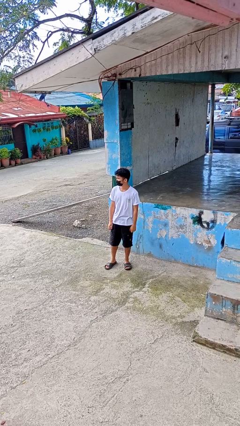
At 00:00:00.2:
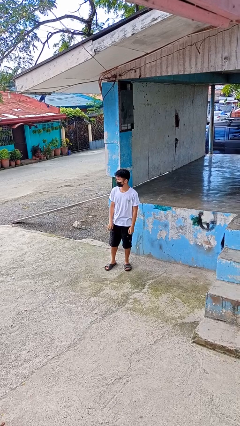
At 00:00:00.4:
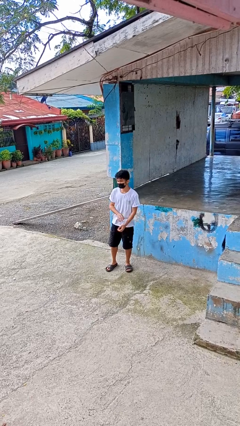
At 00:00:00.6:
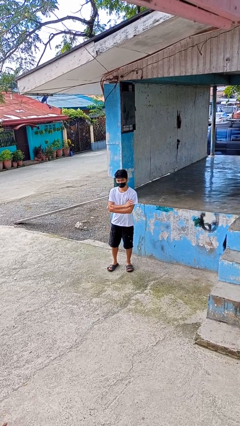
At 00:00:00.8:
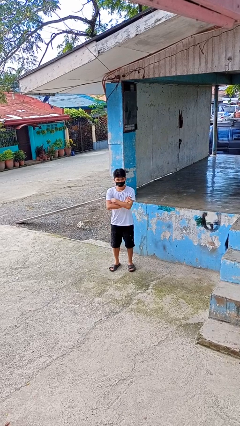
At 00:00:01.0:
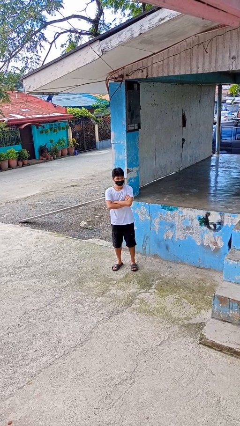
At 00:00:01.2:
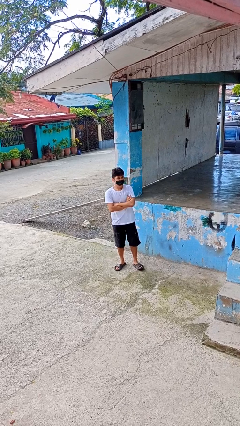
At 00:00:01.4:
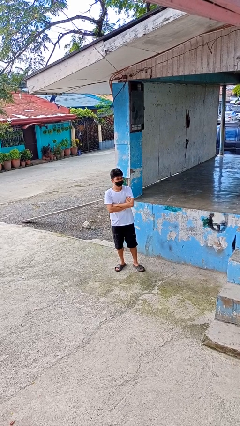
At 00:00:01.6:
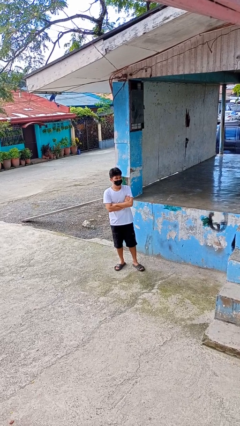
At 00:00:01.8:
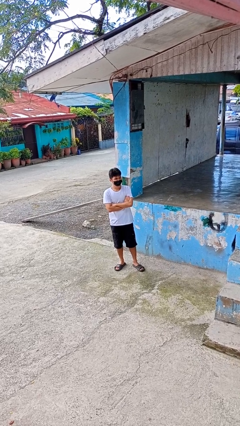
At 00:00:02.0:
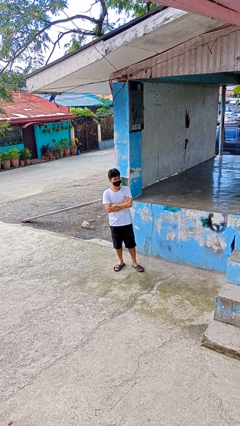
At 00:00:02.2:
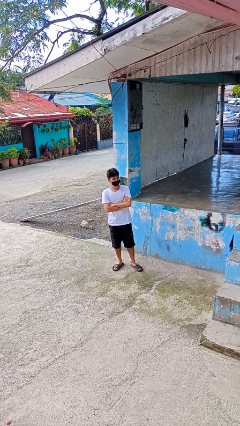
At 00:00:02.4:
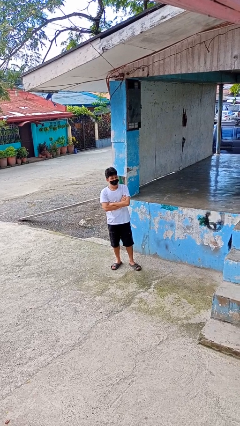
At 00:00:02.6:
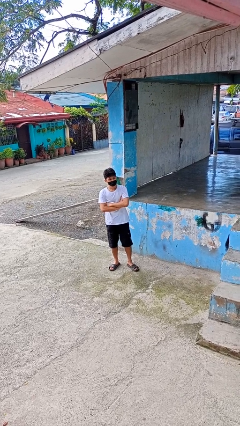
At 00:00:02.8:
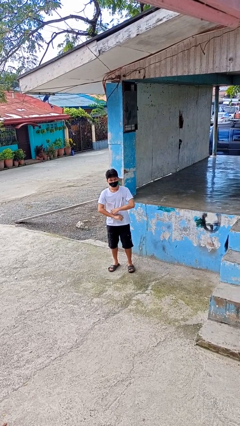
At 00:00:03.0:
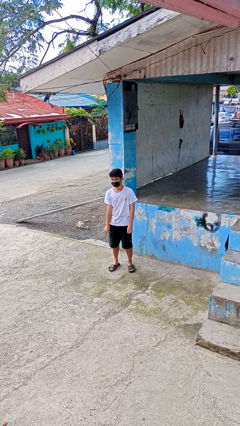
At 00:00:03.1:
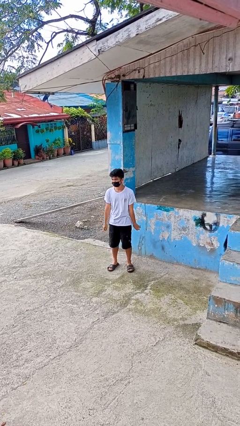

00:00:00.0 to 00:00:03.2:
person crosses arms

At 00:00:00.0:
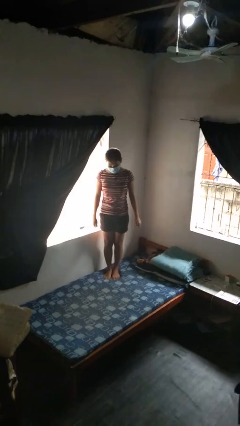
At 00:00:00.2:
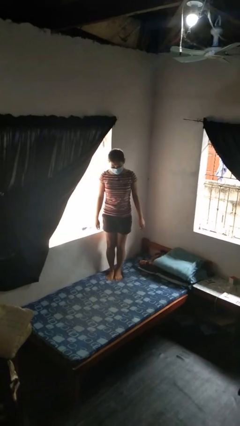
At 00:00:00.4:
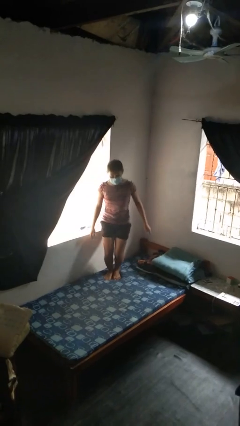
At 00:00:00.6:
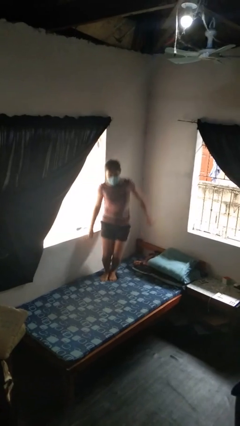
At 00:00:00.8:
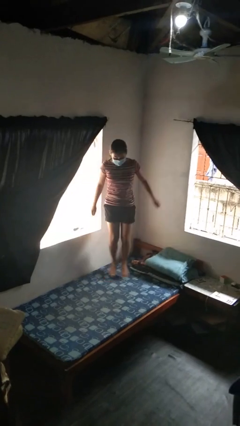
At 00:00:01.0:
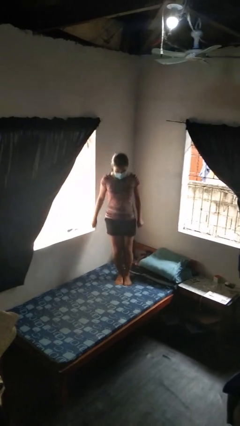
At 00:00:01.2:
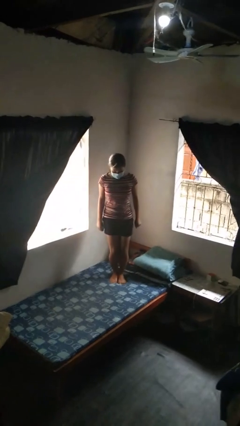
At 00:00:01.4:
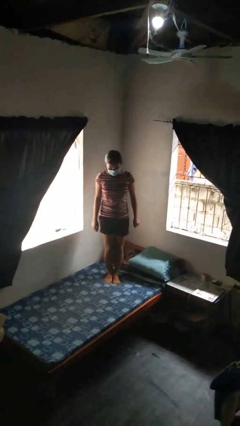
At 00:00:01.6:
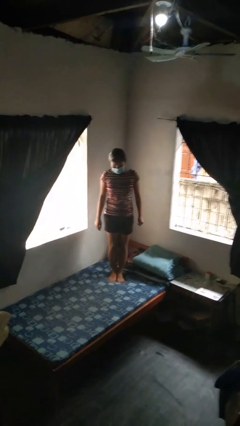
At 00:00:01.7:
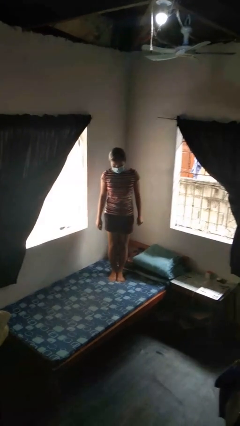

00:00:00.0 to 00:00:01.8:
person jumps on bed

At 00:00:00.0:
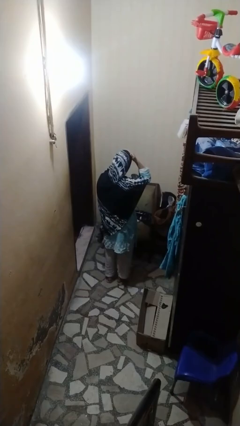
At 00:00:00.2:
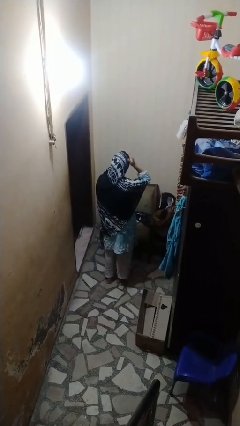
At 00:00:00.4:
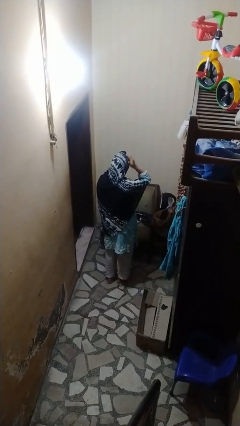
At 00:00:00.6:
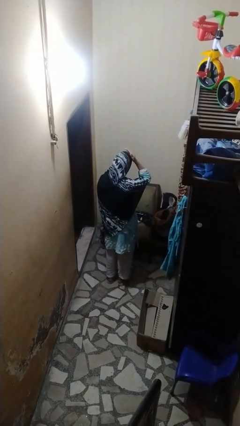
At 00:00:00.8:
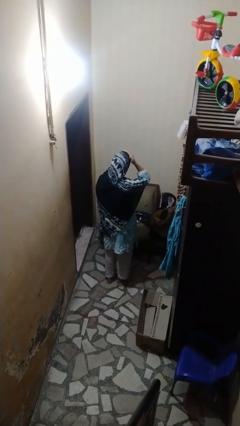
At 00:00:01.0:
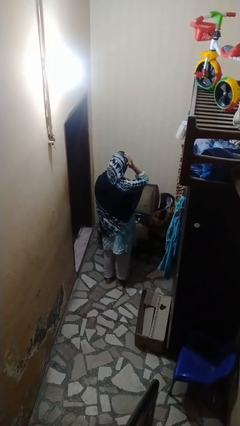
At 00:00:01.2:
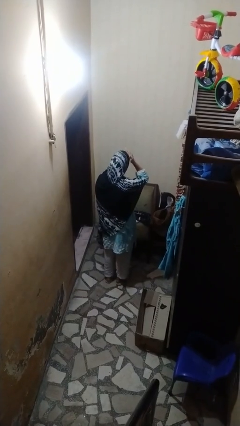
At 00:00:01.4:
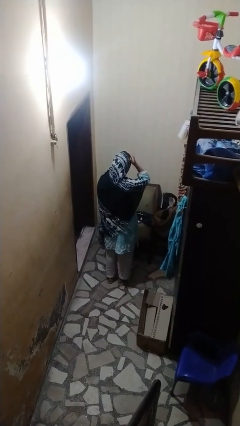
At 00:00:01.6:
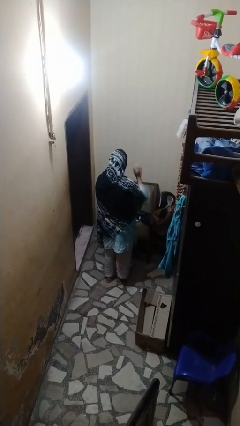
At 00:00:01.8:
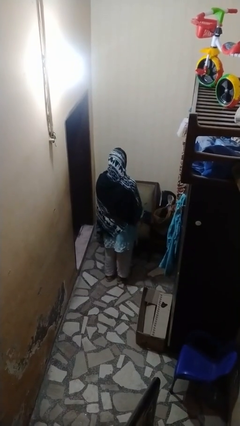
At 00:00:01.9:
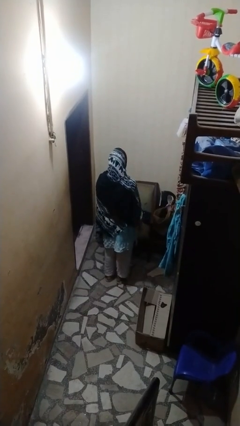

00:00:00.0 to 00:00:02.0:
person pats head

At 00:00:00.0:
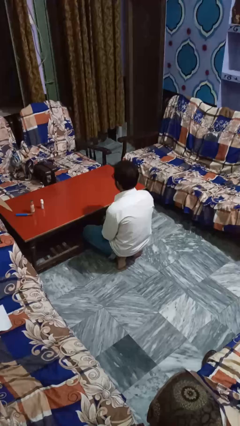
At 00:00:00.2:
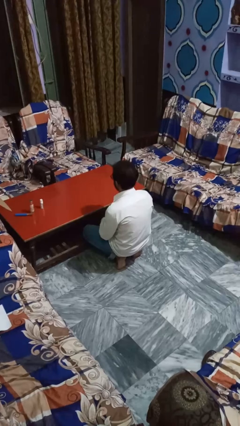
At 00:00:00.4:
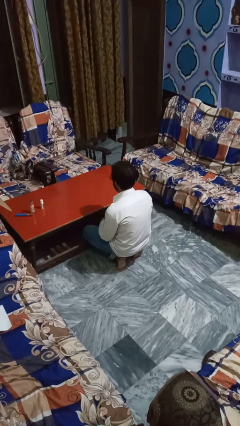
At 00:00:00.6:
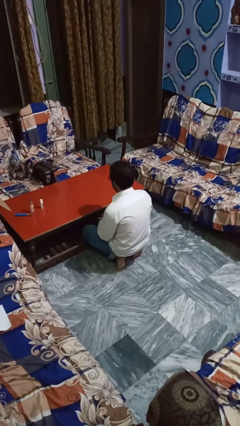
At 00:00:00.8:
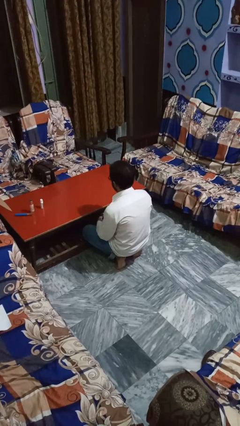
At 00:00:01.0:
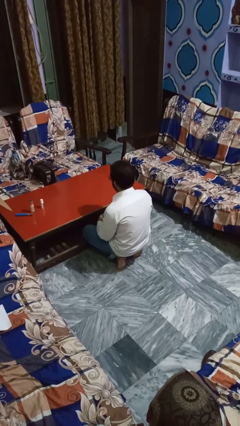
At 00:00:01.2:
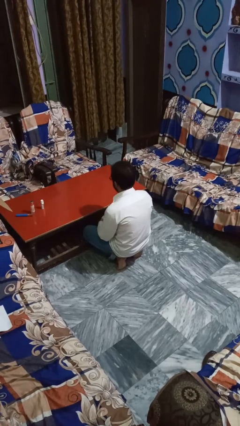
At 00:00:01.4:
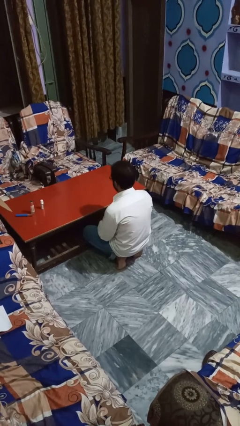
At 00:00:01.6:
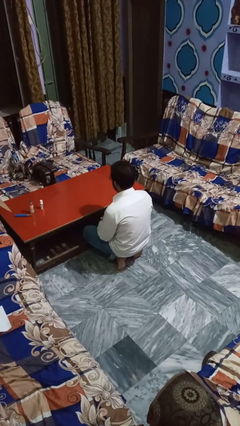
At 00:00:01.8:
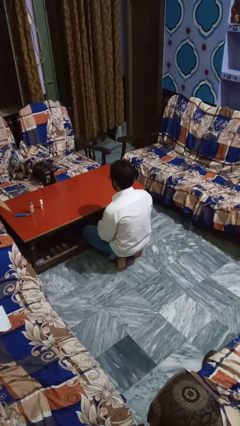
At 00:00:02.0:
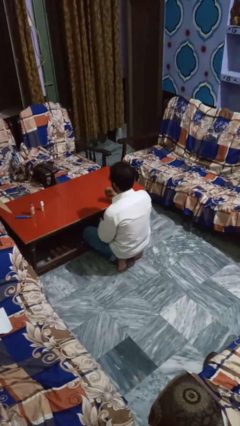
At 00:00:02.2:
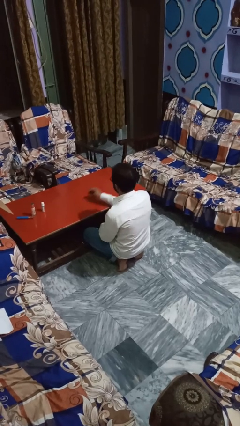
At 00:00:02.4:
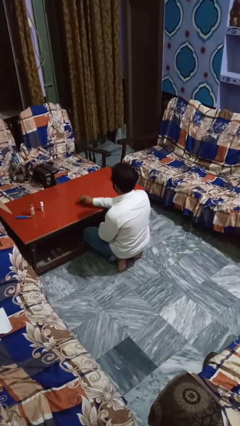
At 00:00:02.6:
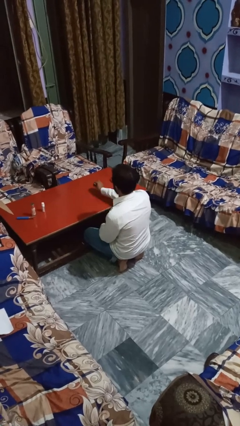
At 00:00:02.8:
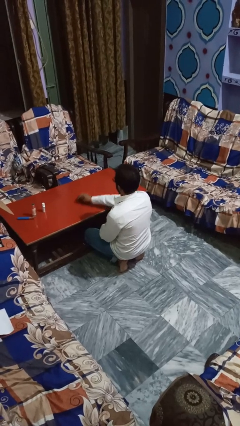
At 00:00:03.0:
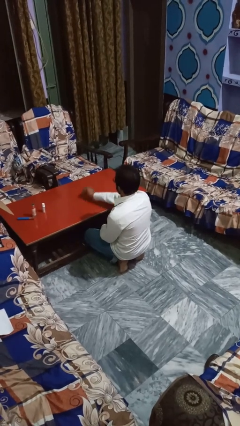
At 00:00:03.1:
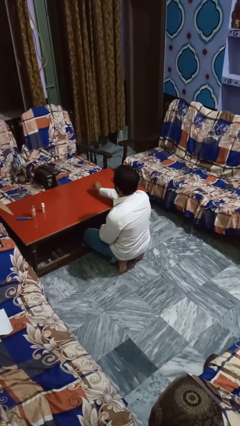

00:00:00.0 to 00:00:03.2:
person cleans table with rag

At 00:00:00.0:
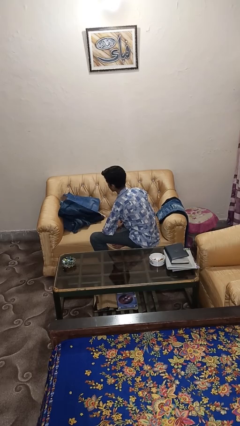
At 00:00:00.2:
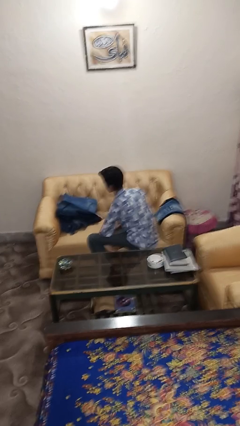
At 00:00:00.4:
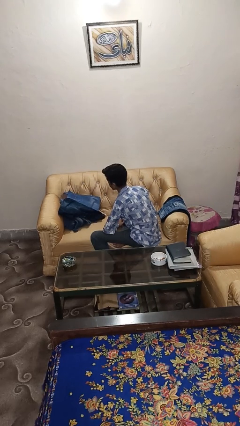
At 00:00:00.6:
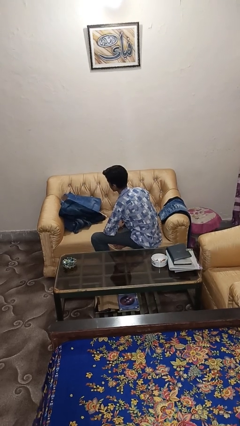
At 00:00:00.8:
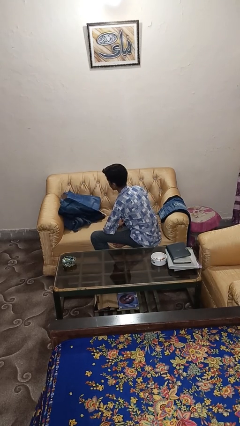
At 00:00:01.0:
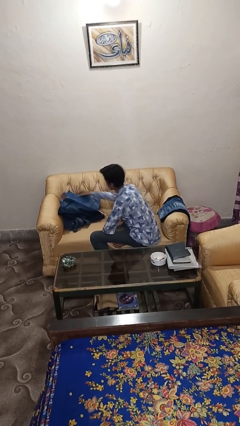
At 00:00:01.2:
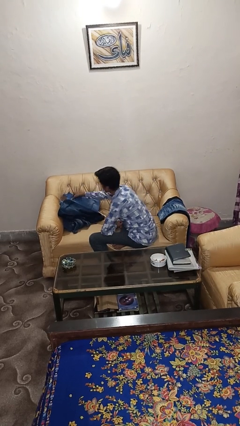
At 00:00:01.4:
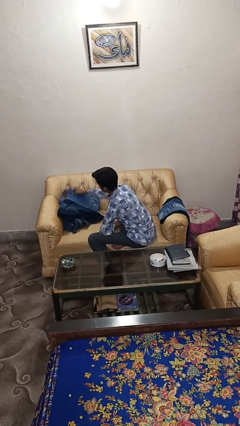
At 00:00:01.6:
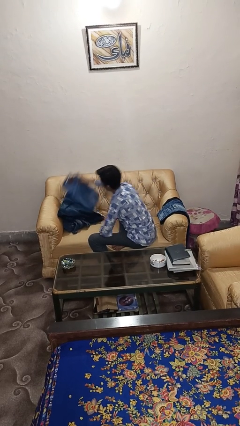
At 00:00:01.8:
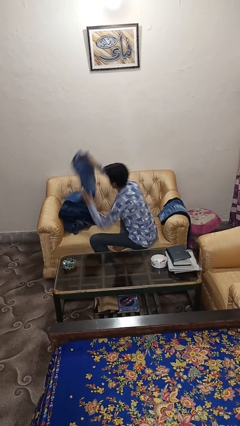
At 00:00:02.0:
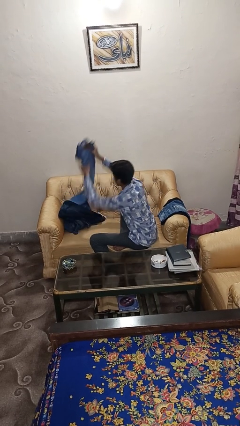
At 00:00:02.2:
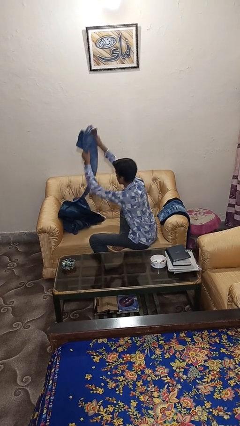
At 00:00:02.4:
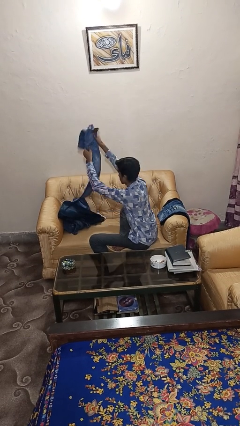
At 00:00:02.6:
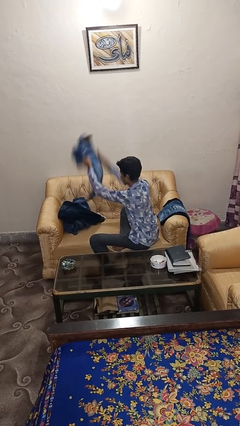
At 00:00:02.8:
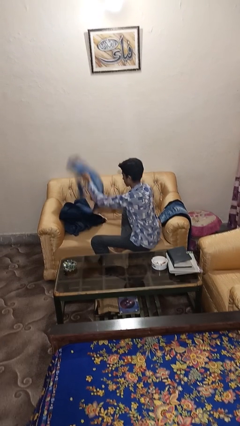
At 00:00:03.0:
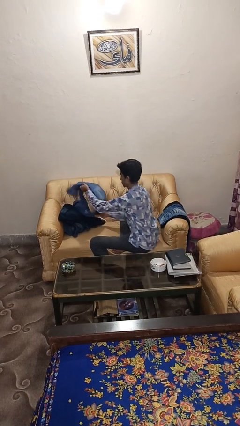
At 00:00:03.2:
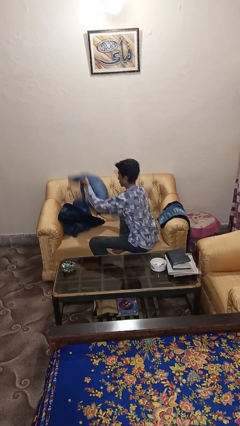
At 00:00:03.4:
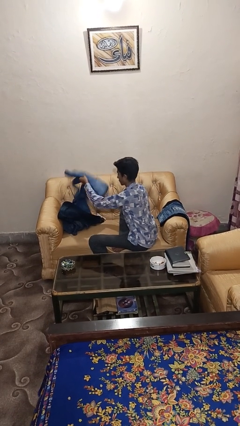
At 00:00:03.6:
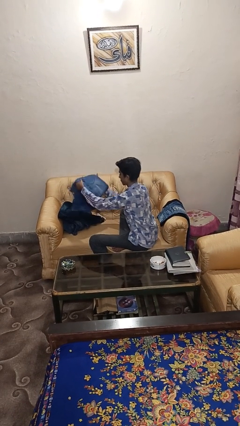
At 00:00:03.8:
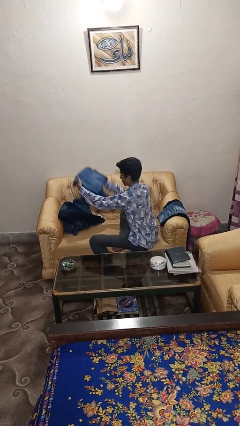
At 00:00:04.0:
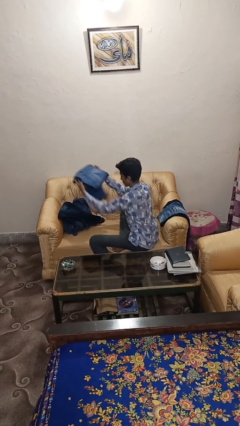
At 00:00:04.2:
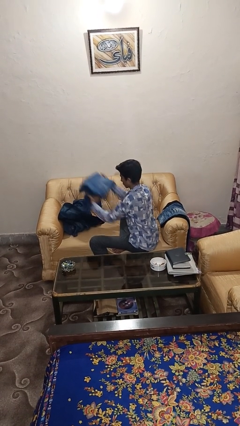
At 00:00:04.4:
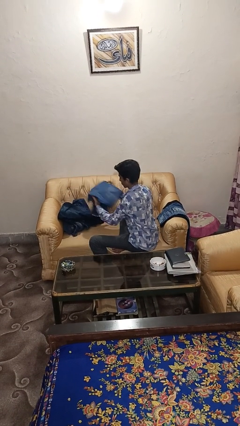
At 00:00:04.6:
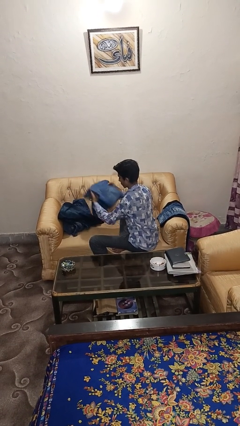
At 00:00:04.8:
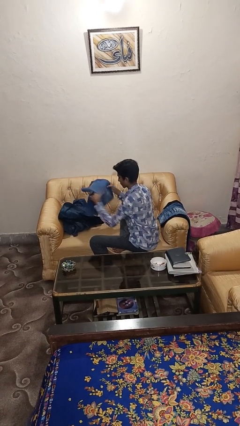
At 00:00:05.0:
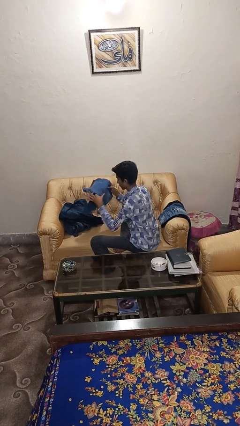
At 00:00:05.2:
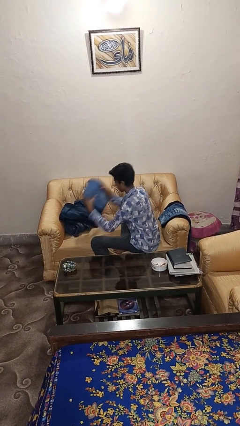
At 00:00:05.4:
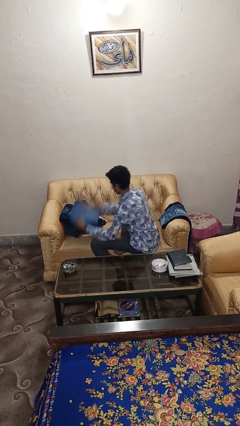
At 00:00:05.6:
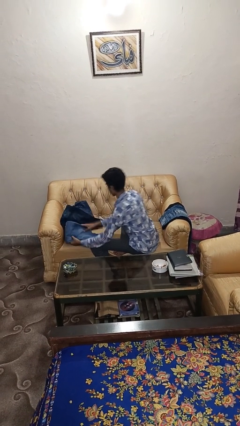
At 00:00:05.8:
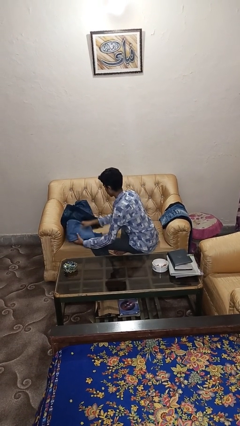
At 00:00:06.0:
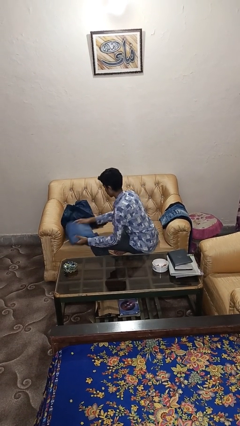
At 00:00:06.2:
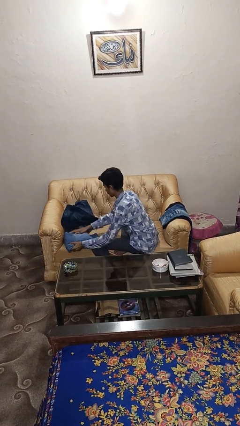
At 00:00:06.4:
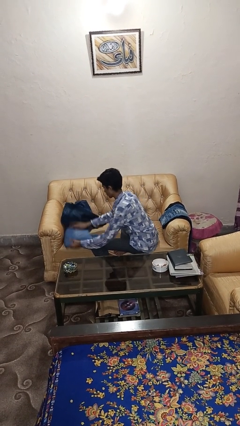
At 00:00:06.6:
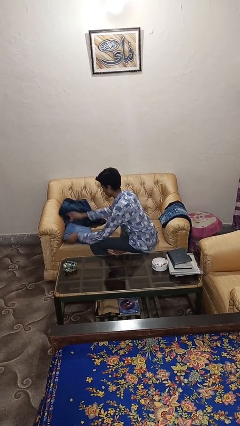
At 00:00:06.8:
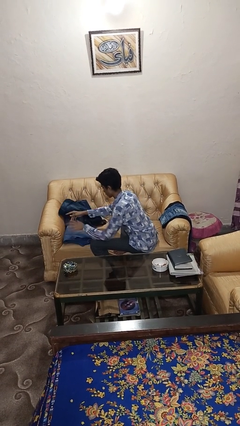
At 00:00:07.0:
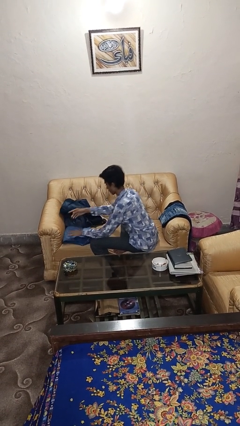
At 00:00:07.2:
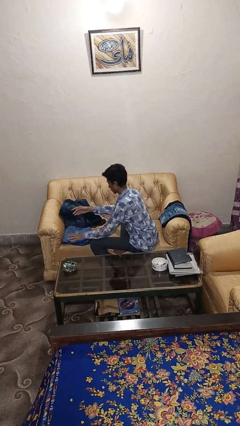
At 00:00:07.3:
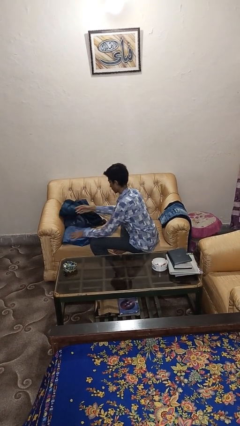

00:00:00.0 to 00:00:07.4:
person folds pants
